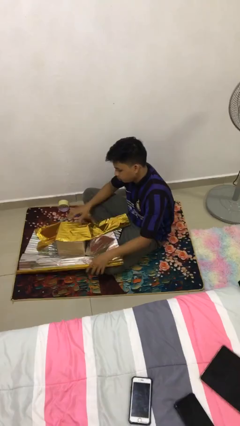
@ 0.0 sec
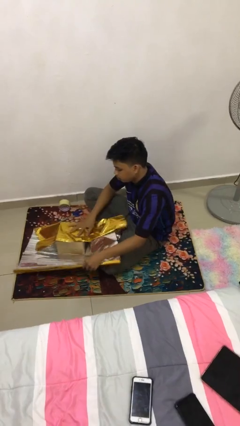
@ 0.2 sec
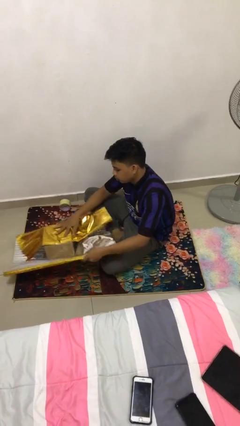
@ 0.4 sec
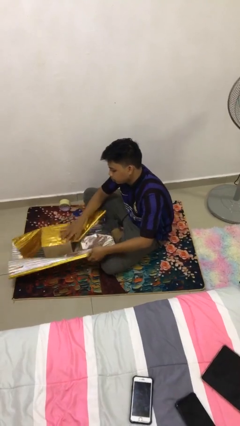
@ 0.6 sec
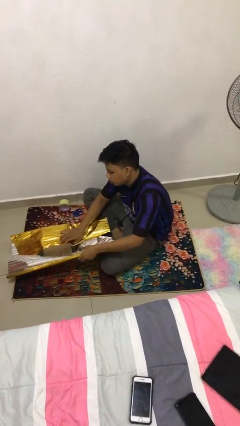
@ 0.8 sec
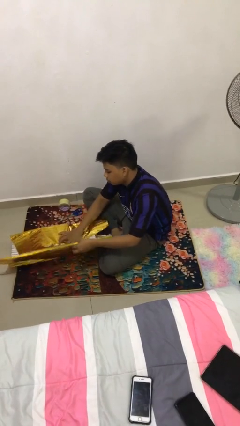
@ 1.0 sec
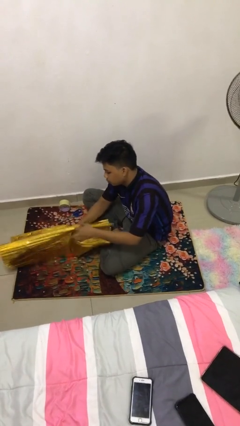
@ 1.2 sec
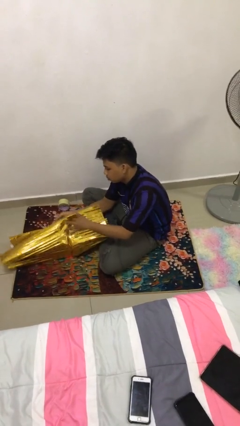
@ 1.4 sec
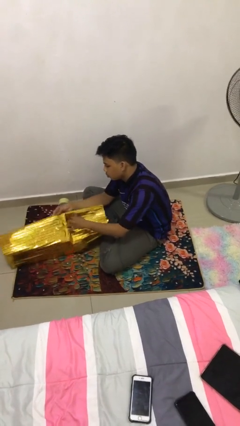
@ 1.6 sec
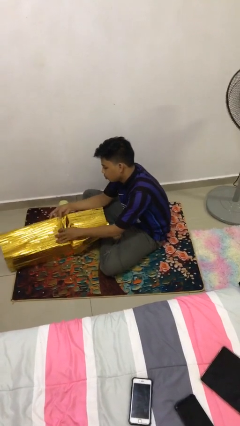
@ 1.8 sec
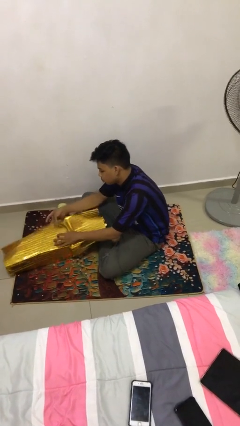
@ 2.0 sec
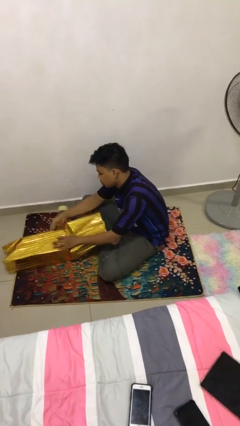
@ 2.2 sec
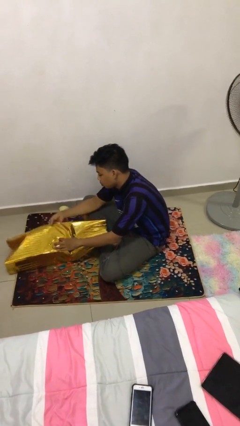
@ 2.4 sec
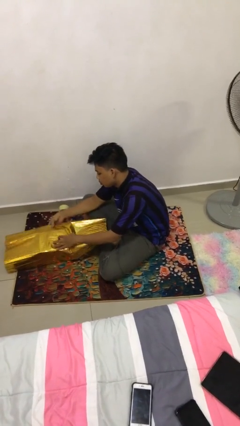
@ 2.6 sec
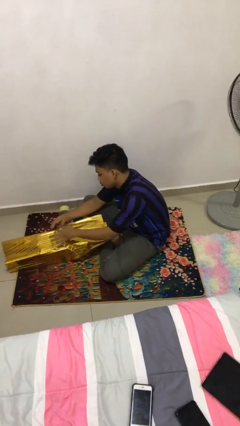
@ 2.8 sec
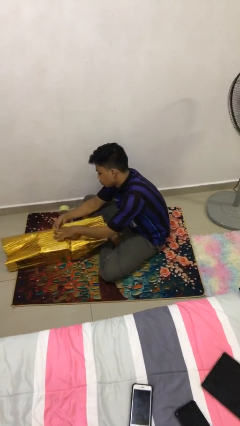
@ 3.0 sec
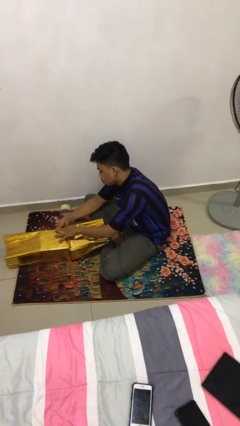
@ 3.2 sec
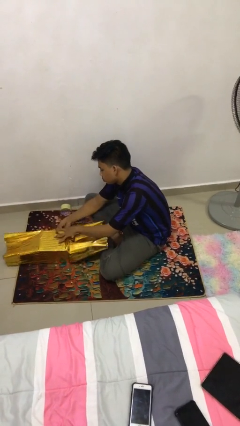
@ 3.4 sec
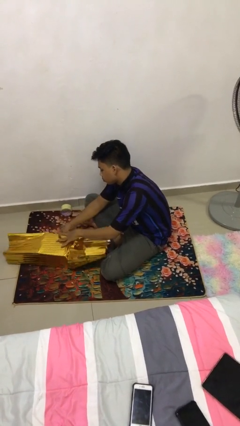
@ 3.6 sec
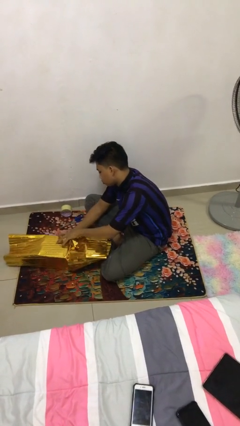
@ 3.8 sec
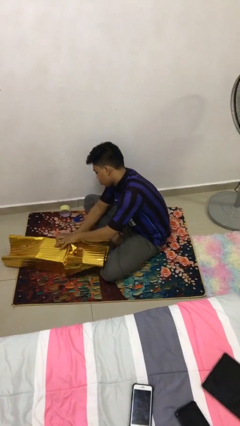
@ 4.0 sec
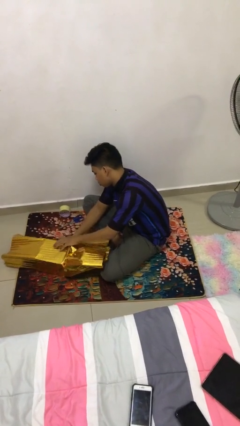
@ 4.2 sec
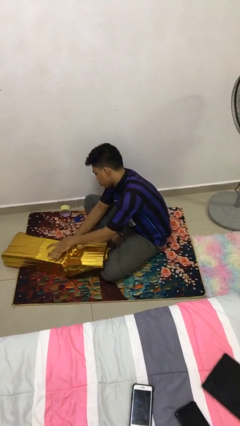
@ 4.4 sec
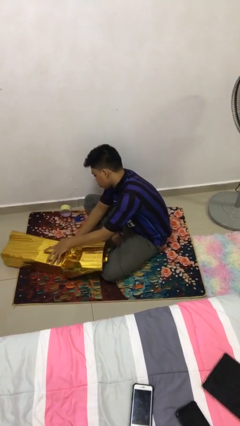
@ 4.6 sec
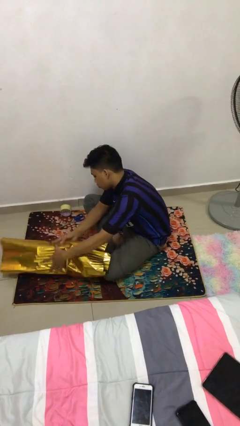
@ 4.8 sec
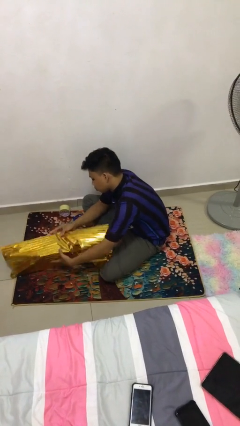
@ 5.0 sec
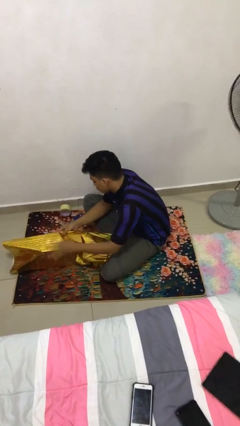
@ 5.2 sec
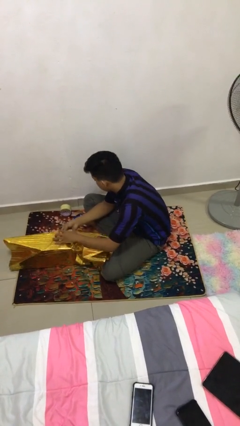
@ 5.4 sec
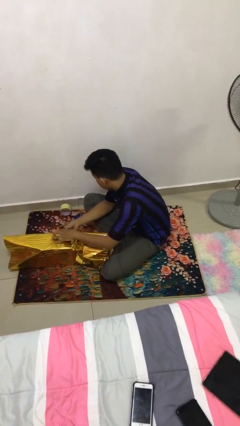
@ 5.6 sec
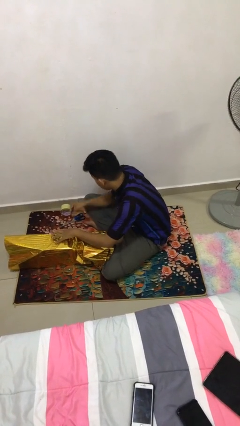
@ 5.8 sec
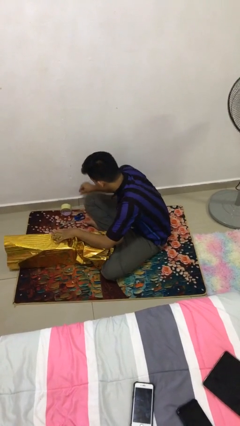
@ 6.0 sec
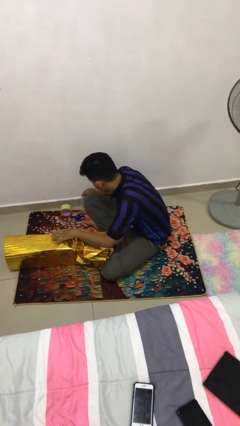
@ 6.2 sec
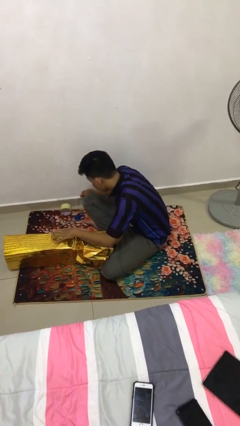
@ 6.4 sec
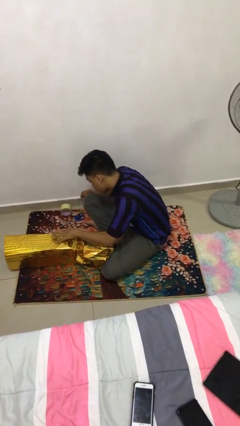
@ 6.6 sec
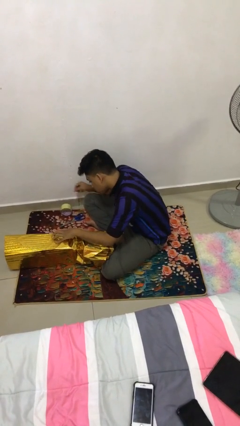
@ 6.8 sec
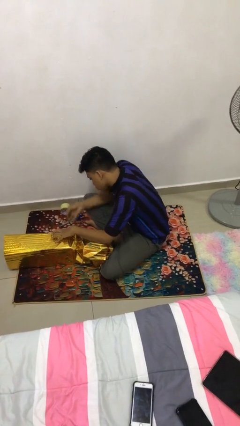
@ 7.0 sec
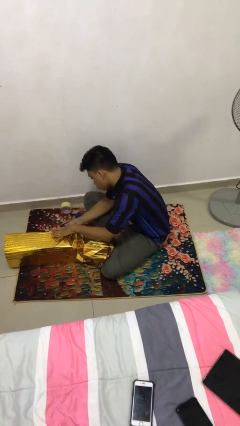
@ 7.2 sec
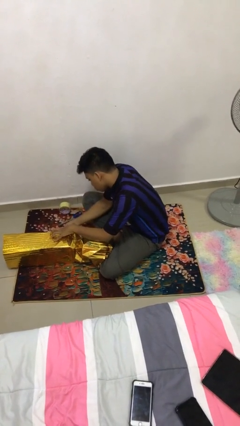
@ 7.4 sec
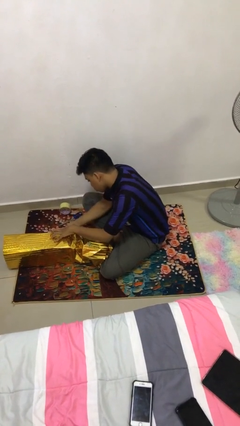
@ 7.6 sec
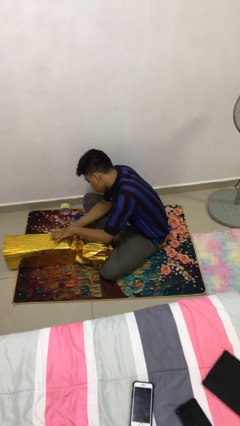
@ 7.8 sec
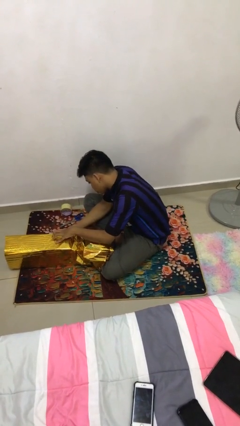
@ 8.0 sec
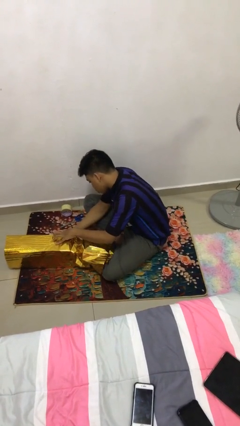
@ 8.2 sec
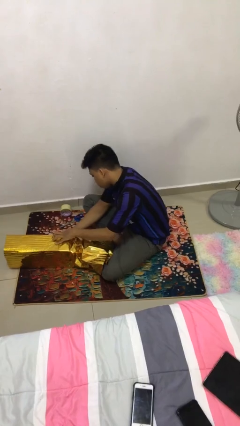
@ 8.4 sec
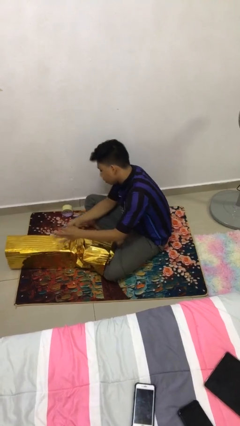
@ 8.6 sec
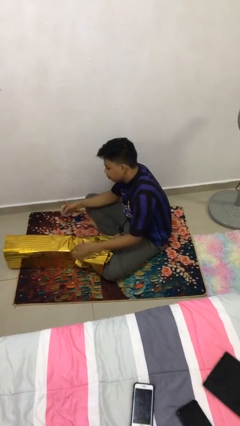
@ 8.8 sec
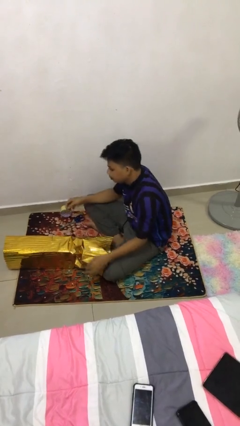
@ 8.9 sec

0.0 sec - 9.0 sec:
person wraps box

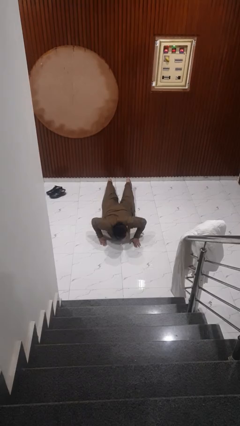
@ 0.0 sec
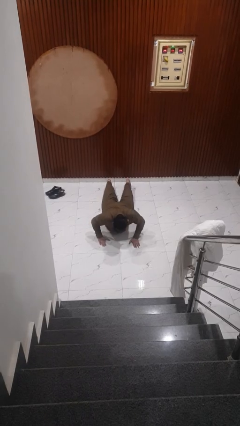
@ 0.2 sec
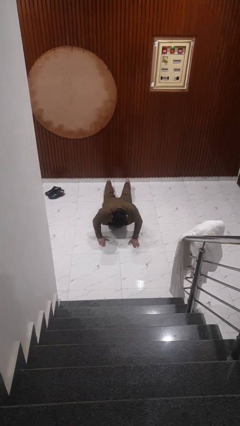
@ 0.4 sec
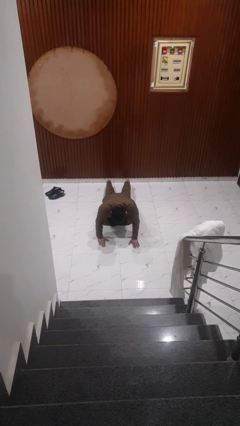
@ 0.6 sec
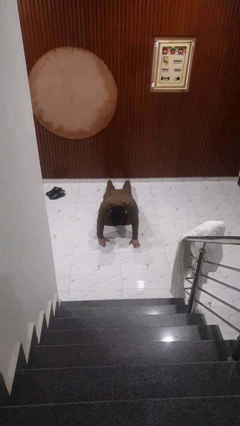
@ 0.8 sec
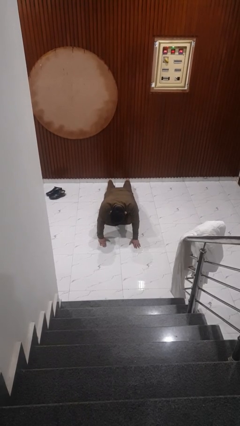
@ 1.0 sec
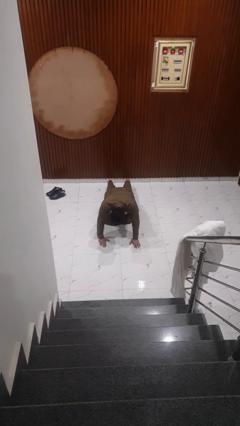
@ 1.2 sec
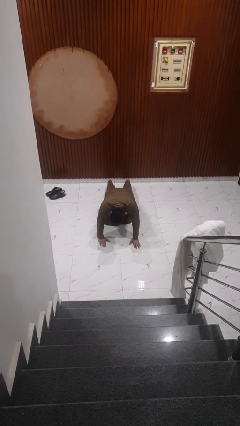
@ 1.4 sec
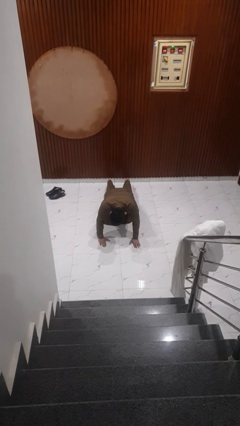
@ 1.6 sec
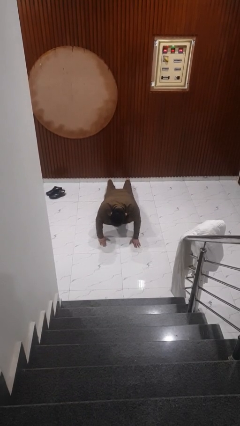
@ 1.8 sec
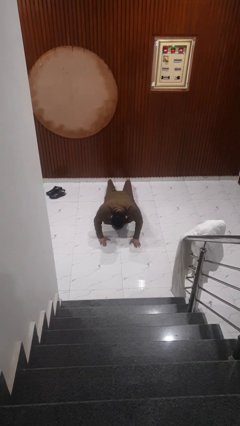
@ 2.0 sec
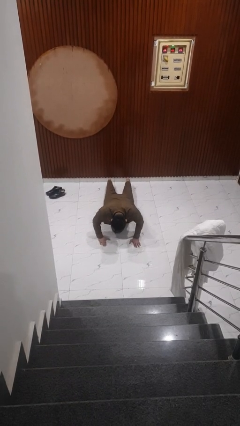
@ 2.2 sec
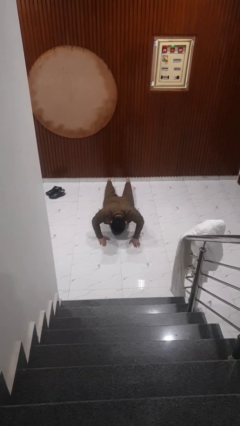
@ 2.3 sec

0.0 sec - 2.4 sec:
person exercises with pushup

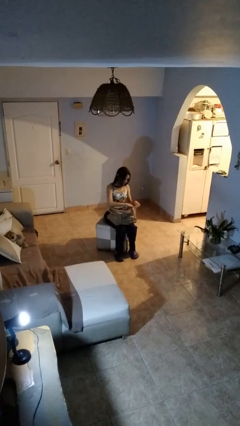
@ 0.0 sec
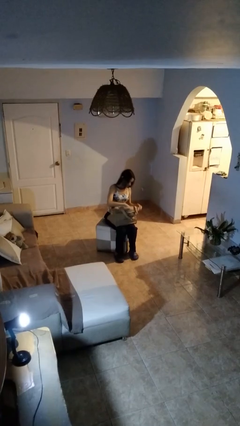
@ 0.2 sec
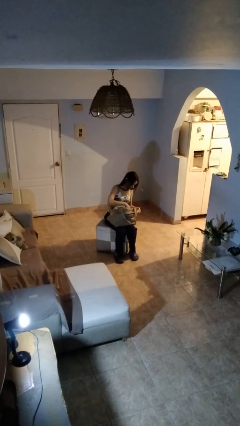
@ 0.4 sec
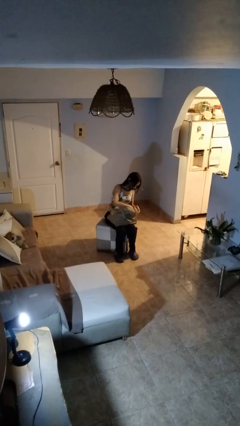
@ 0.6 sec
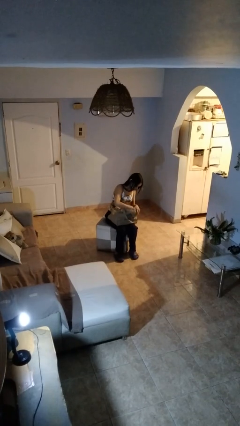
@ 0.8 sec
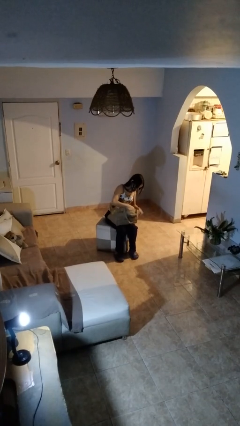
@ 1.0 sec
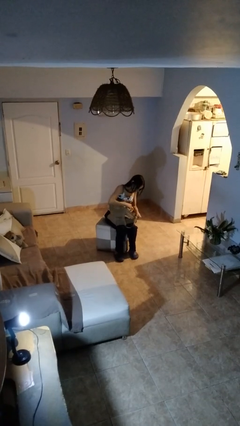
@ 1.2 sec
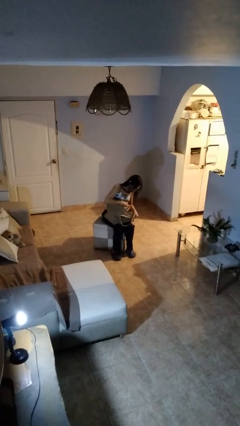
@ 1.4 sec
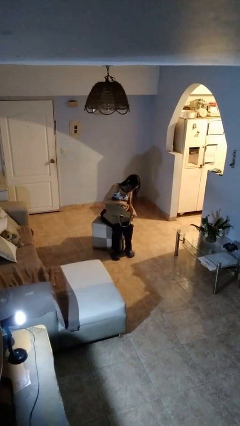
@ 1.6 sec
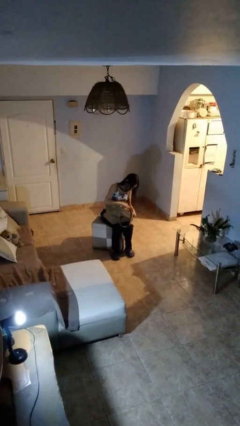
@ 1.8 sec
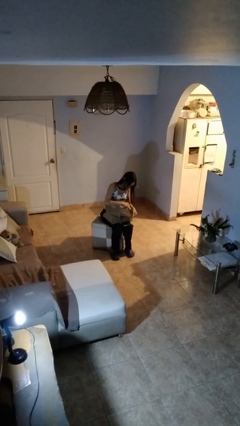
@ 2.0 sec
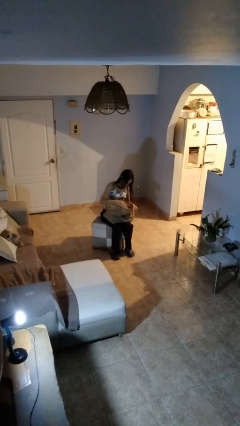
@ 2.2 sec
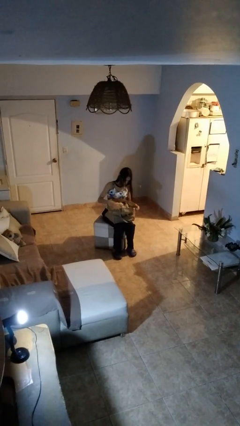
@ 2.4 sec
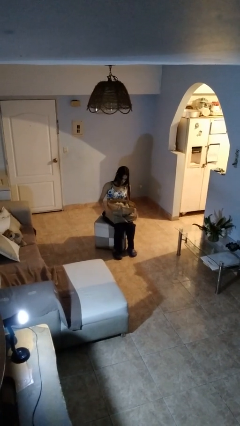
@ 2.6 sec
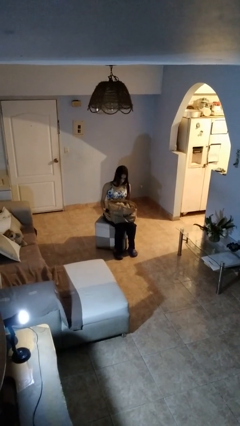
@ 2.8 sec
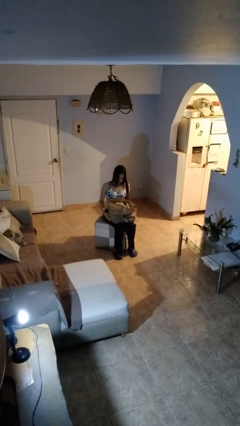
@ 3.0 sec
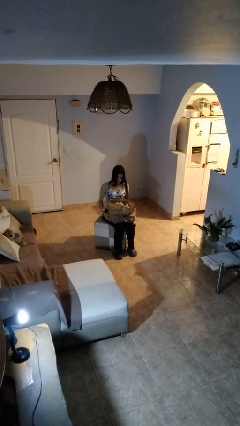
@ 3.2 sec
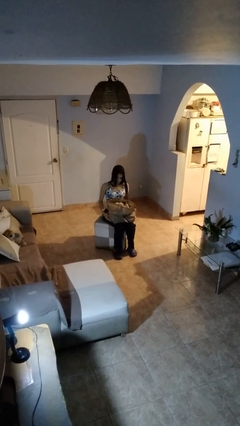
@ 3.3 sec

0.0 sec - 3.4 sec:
person searches in bag

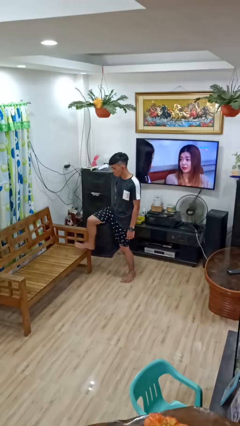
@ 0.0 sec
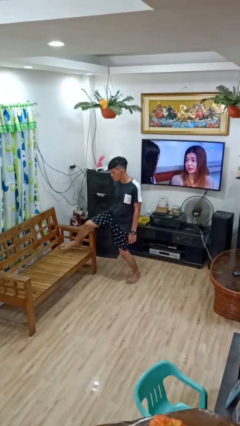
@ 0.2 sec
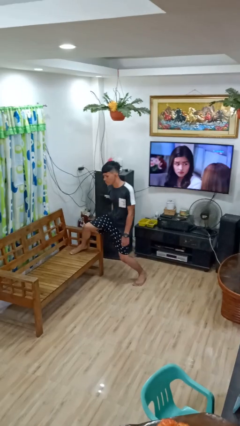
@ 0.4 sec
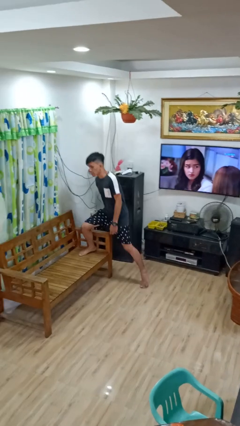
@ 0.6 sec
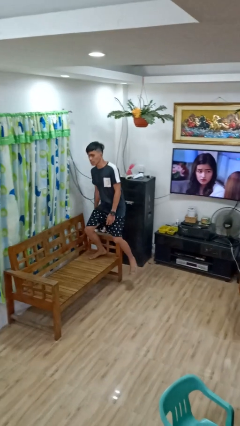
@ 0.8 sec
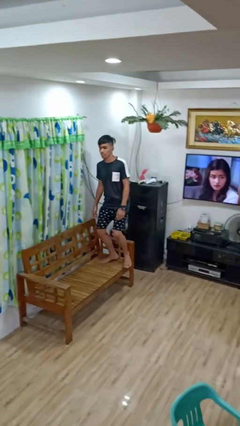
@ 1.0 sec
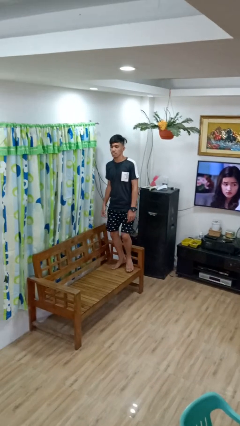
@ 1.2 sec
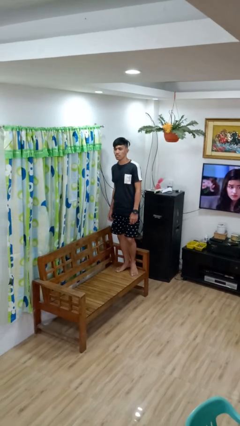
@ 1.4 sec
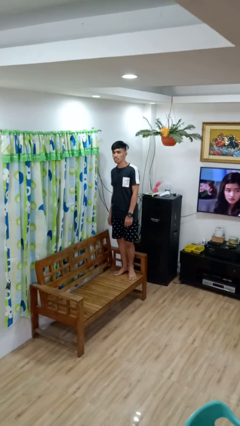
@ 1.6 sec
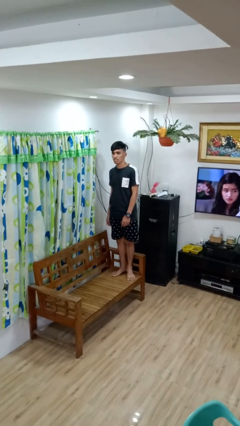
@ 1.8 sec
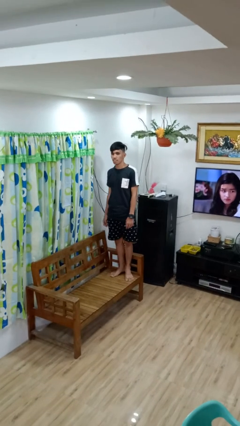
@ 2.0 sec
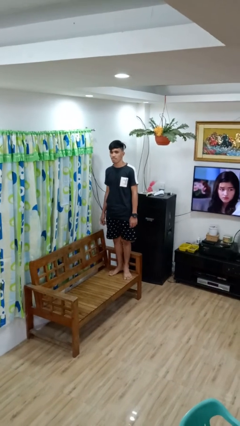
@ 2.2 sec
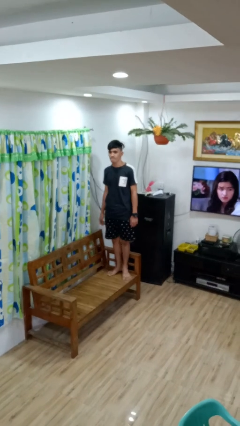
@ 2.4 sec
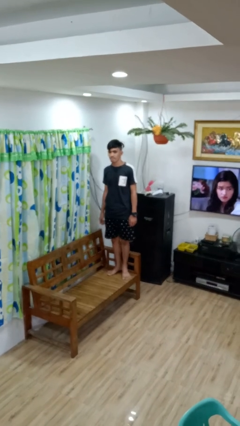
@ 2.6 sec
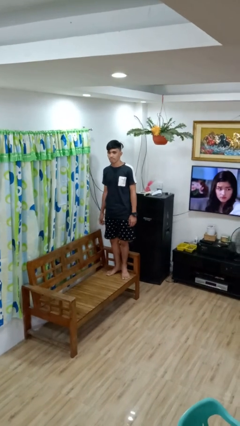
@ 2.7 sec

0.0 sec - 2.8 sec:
person climbs on couch
